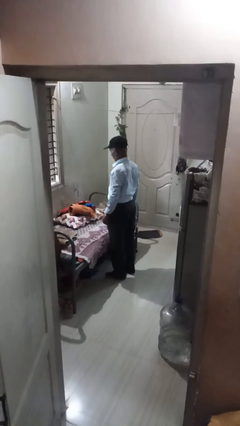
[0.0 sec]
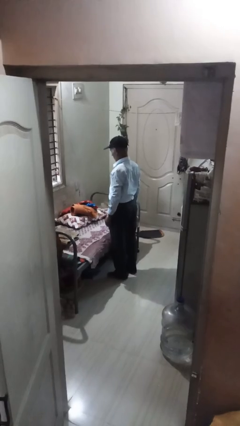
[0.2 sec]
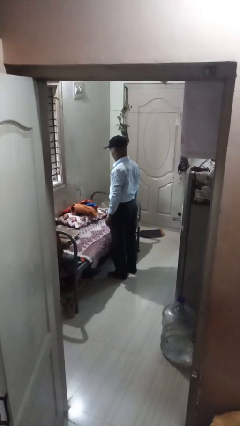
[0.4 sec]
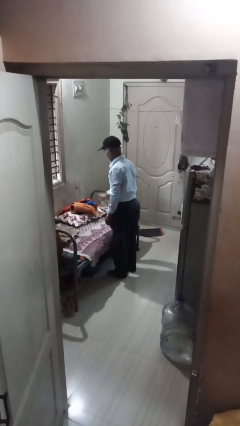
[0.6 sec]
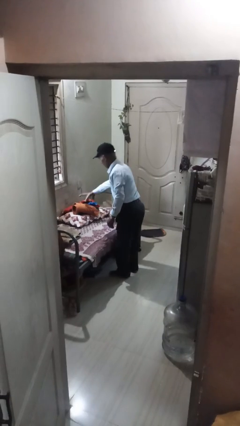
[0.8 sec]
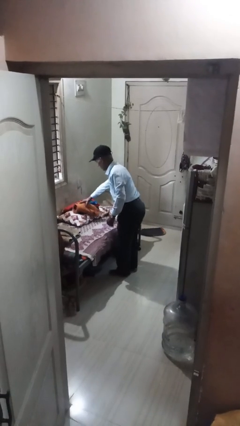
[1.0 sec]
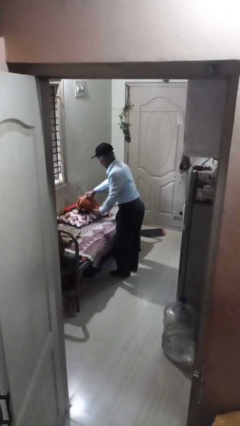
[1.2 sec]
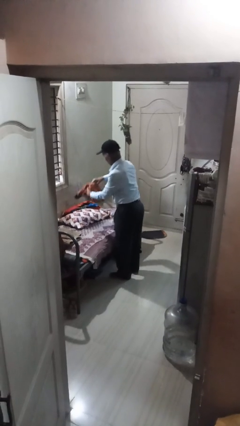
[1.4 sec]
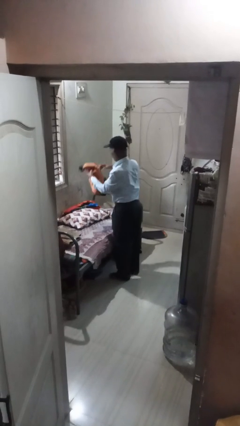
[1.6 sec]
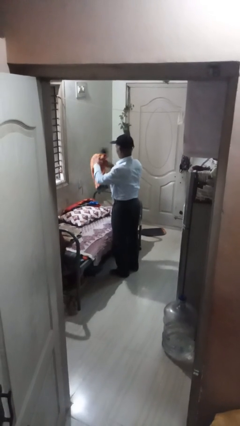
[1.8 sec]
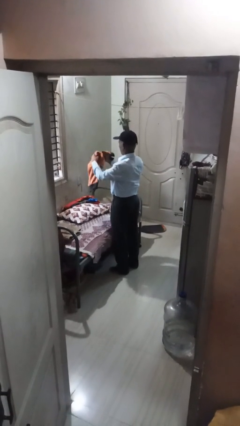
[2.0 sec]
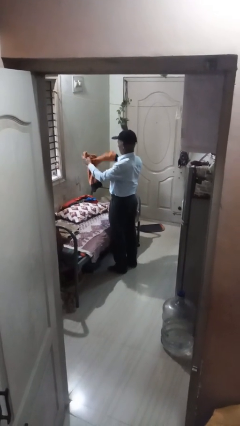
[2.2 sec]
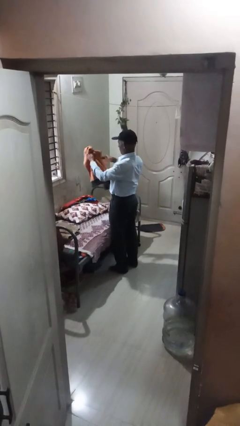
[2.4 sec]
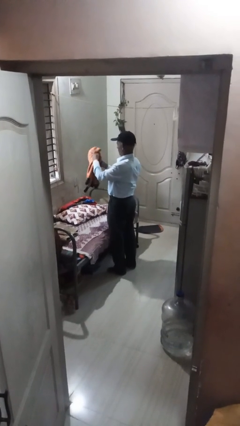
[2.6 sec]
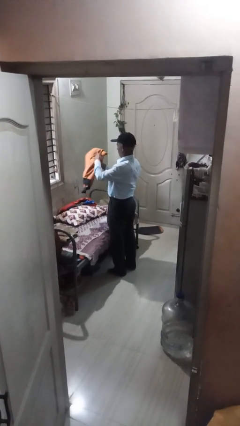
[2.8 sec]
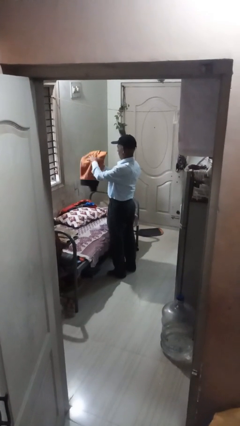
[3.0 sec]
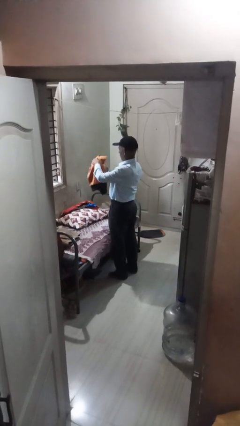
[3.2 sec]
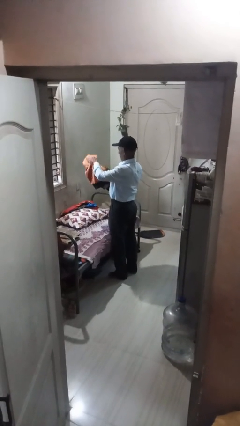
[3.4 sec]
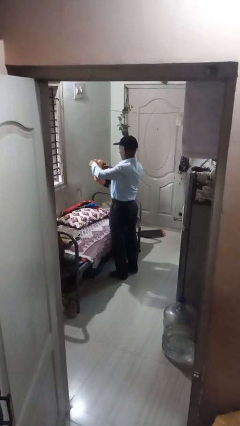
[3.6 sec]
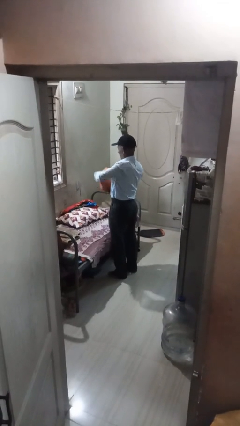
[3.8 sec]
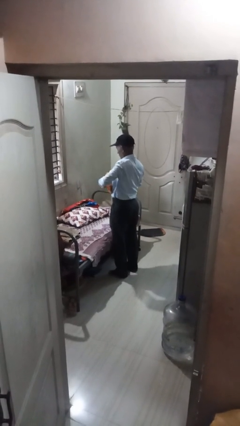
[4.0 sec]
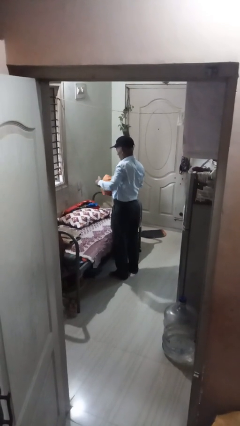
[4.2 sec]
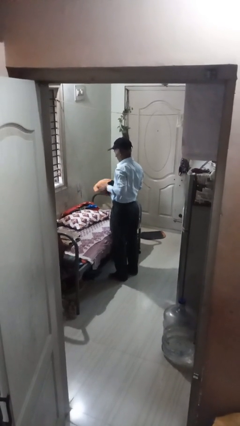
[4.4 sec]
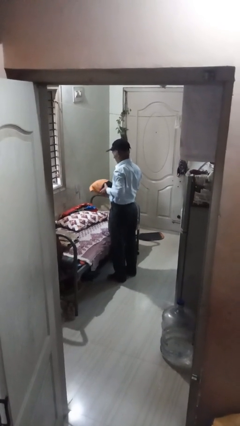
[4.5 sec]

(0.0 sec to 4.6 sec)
person folds shirt

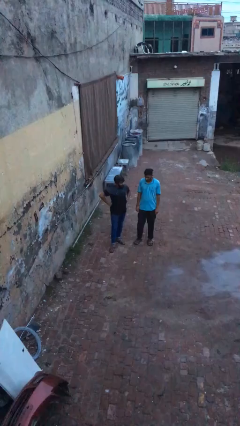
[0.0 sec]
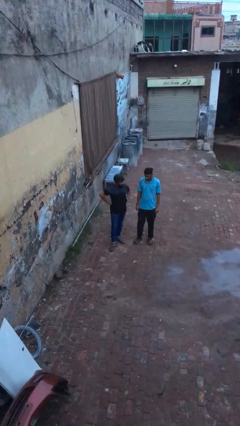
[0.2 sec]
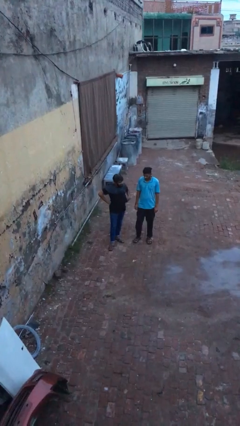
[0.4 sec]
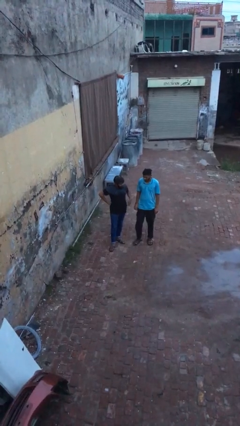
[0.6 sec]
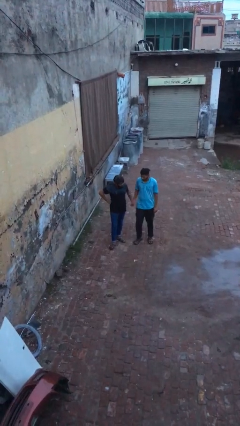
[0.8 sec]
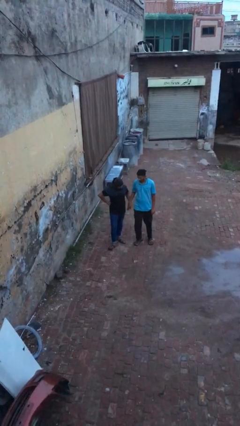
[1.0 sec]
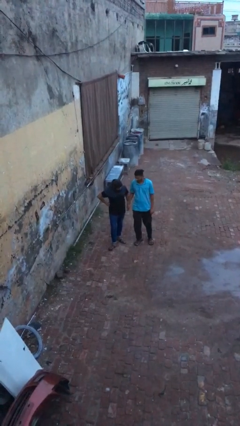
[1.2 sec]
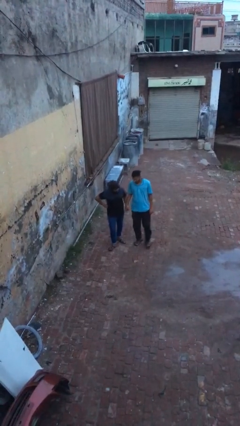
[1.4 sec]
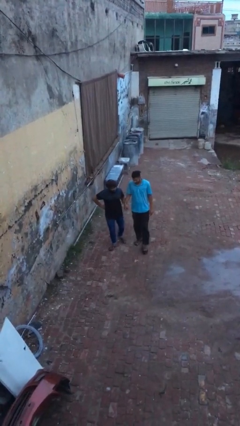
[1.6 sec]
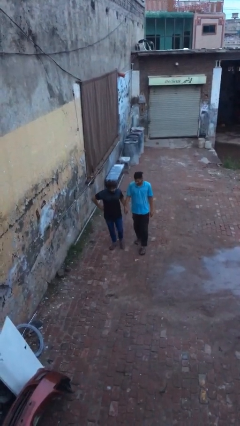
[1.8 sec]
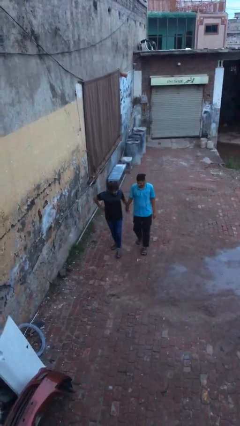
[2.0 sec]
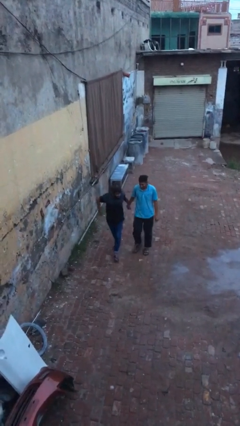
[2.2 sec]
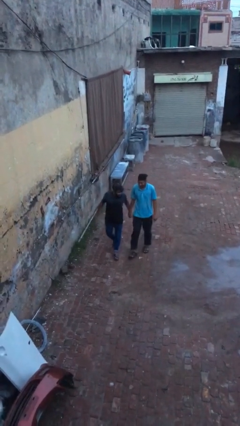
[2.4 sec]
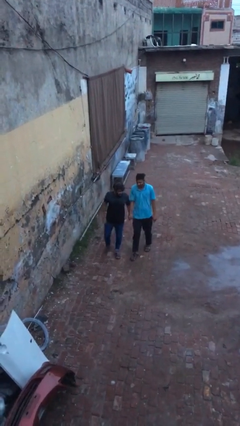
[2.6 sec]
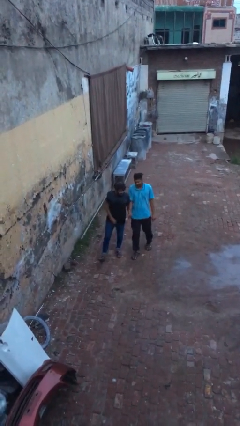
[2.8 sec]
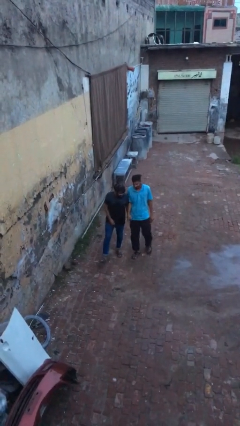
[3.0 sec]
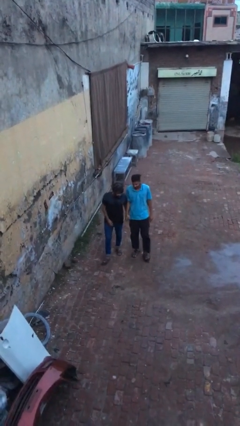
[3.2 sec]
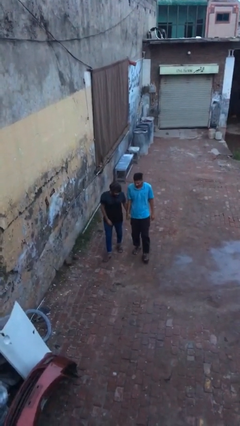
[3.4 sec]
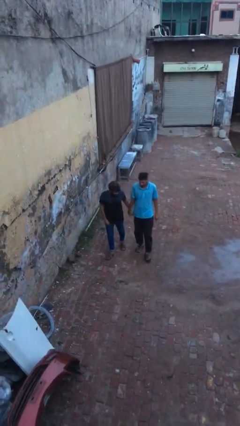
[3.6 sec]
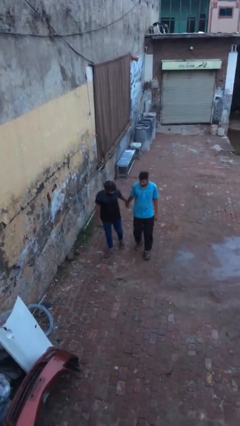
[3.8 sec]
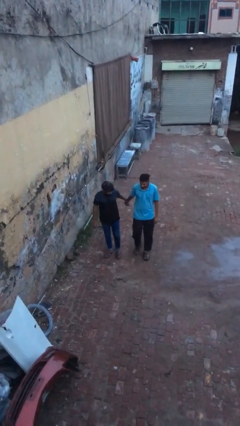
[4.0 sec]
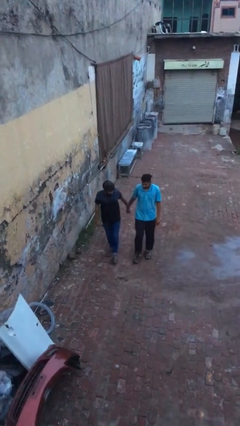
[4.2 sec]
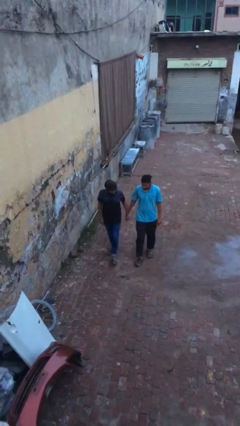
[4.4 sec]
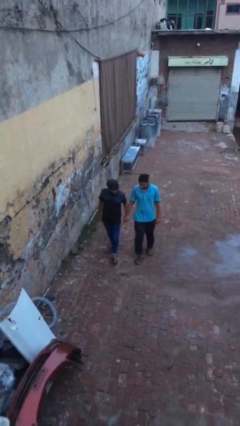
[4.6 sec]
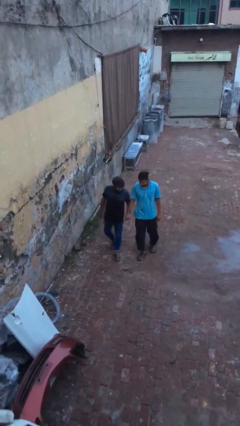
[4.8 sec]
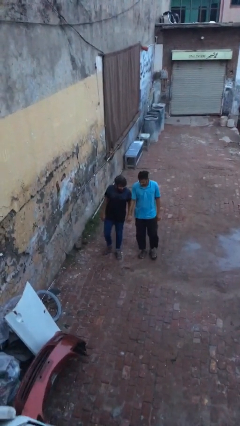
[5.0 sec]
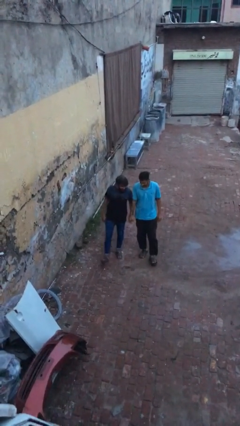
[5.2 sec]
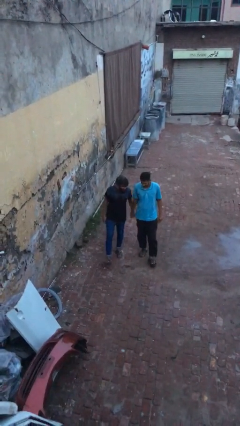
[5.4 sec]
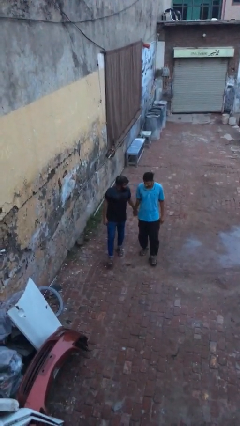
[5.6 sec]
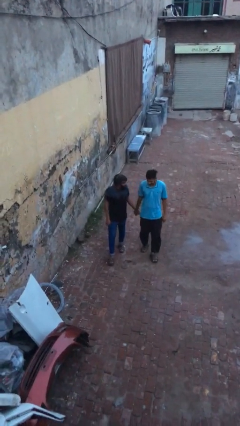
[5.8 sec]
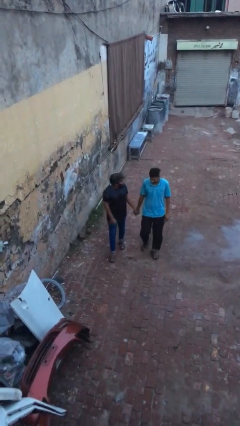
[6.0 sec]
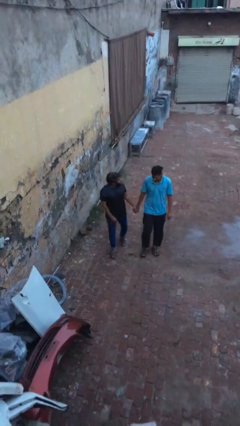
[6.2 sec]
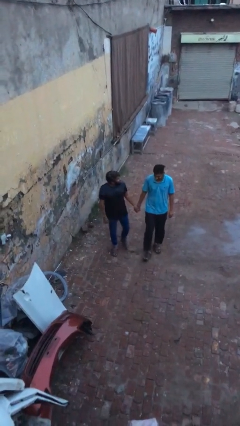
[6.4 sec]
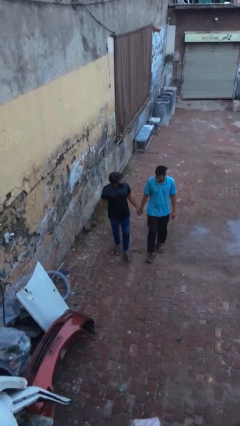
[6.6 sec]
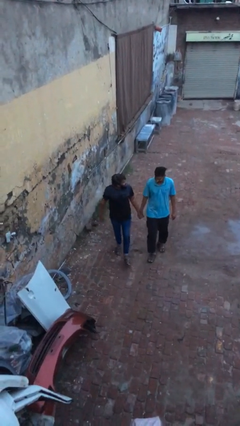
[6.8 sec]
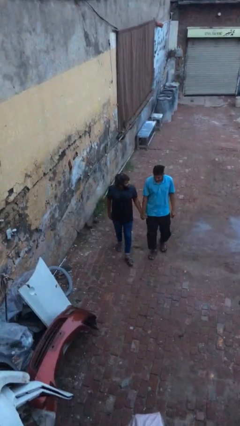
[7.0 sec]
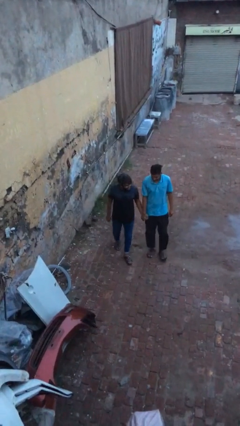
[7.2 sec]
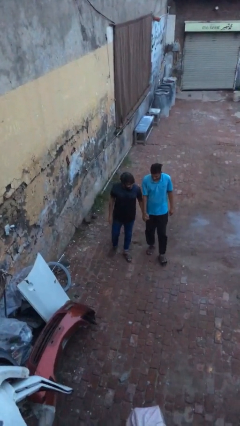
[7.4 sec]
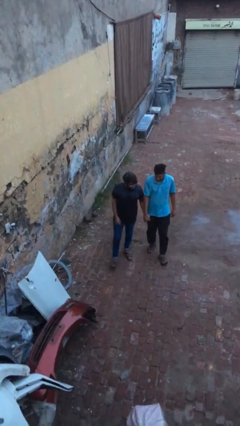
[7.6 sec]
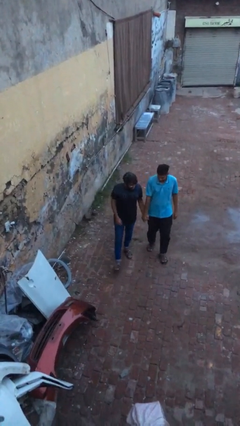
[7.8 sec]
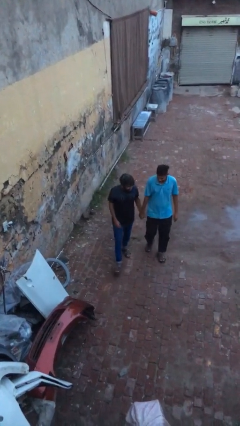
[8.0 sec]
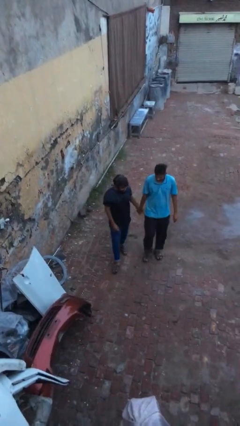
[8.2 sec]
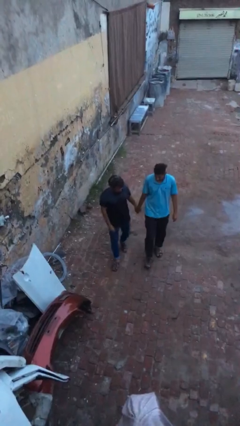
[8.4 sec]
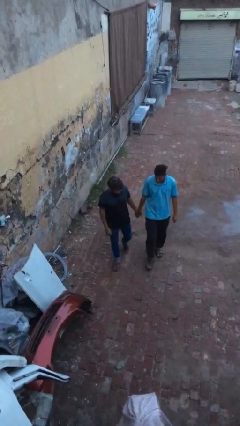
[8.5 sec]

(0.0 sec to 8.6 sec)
person holds hand

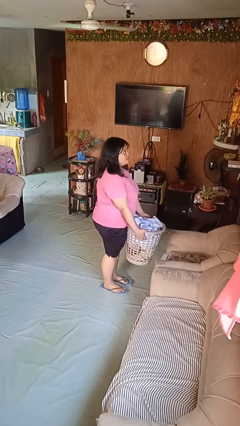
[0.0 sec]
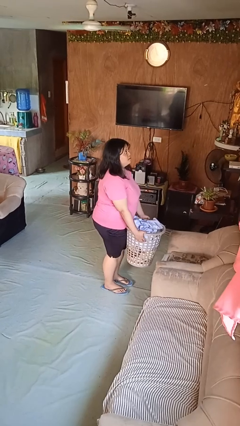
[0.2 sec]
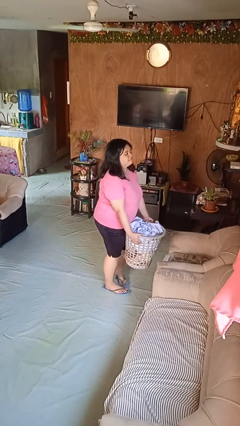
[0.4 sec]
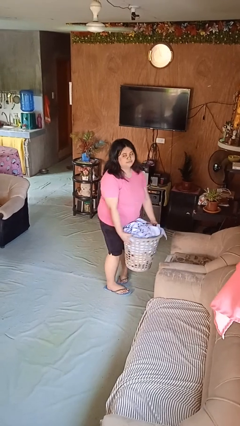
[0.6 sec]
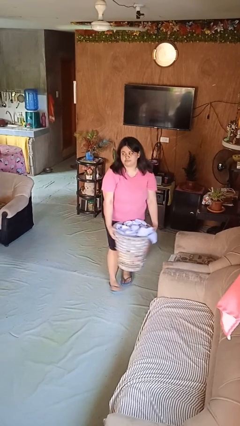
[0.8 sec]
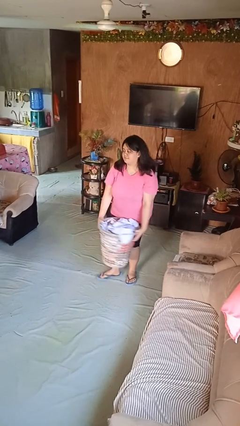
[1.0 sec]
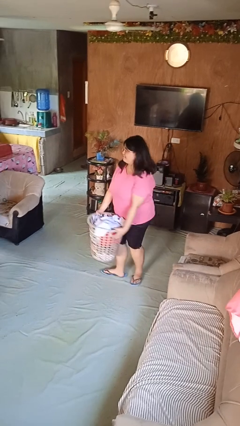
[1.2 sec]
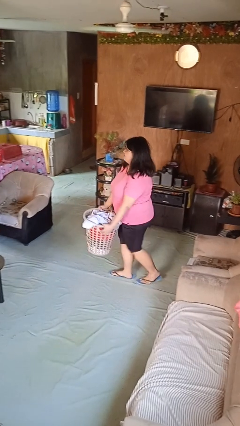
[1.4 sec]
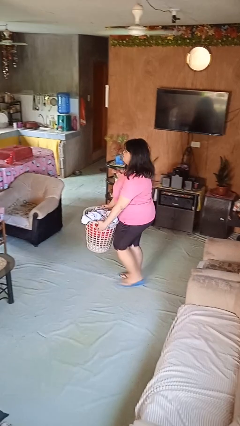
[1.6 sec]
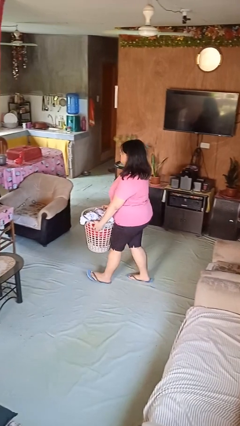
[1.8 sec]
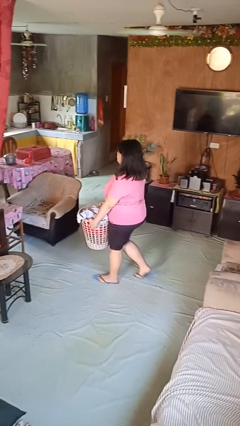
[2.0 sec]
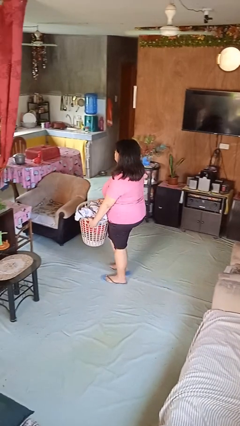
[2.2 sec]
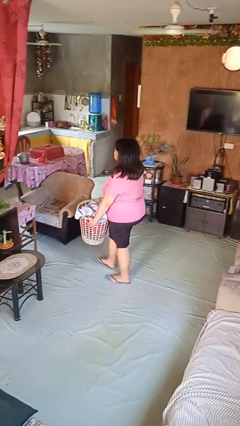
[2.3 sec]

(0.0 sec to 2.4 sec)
person carries laundry basket

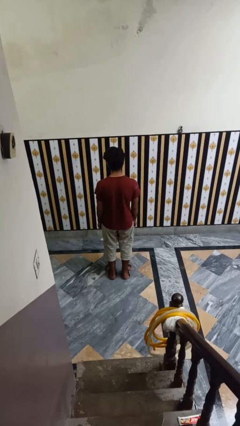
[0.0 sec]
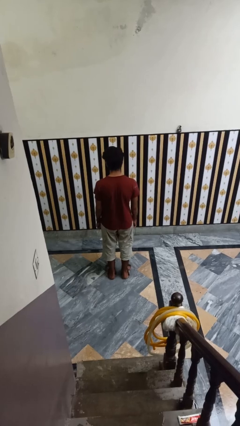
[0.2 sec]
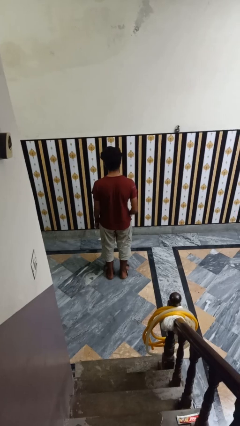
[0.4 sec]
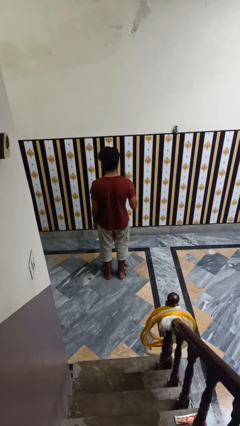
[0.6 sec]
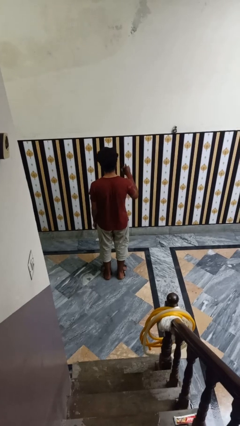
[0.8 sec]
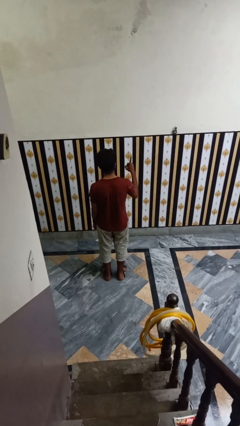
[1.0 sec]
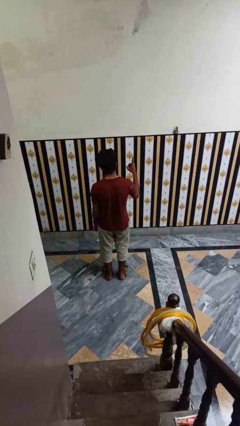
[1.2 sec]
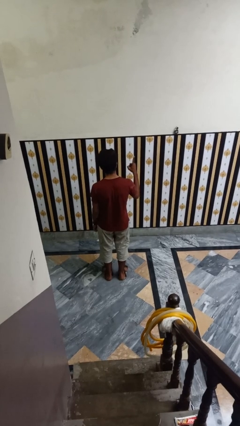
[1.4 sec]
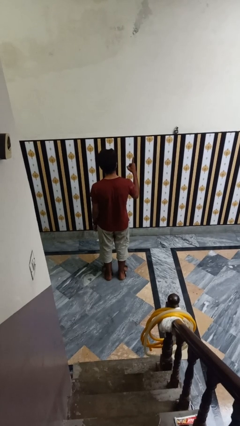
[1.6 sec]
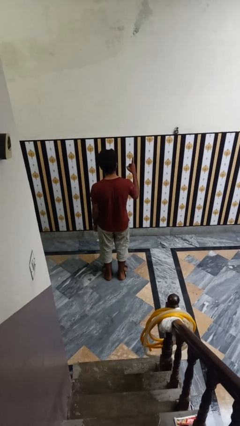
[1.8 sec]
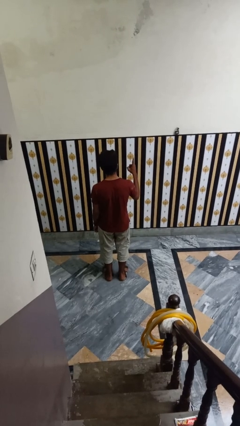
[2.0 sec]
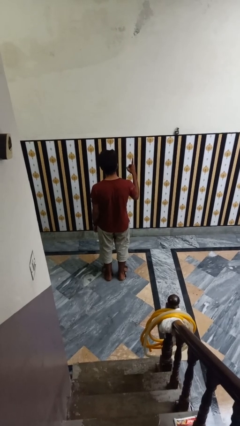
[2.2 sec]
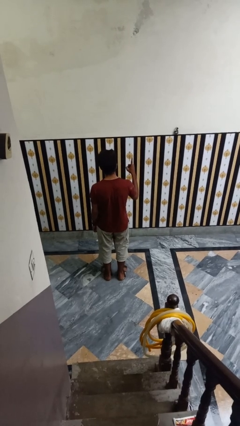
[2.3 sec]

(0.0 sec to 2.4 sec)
person gestures number one
